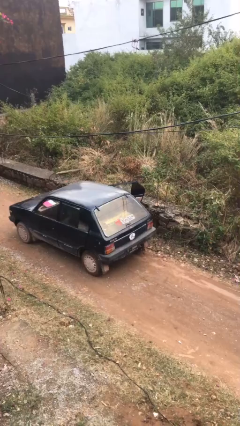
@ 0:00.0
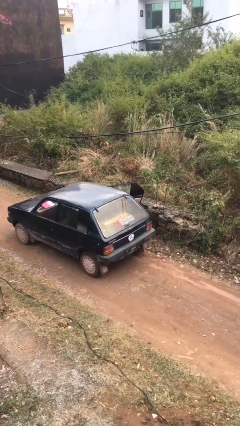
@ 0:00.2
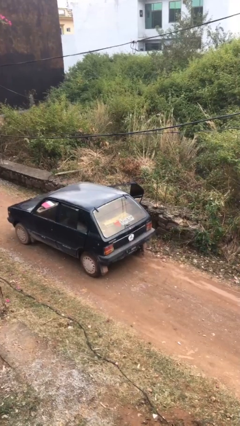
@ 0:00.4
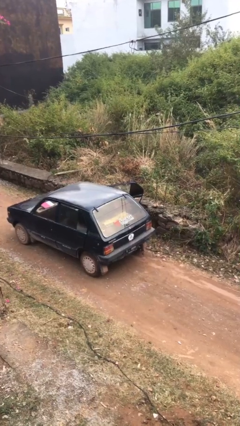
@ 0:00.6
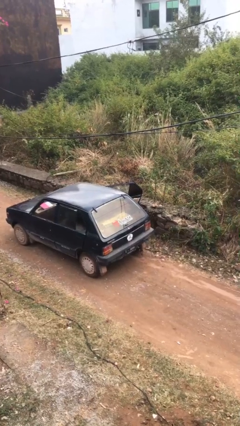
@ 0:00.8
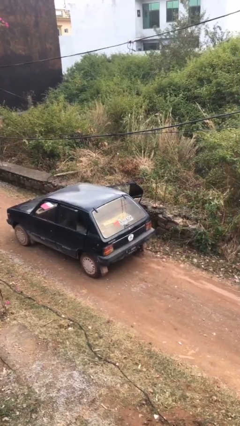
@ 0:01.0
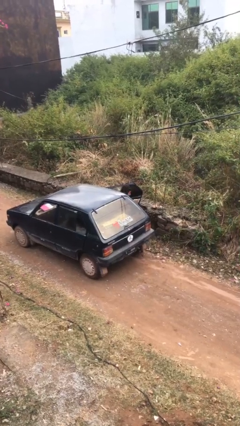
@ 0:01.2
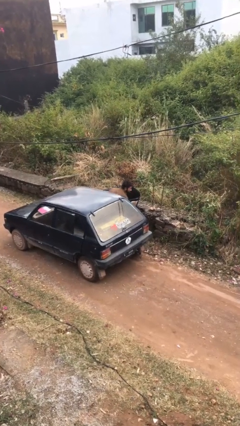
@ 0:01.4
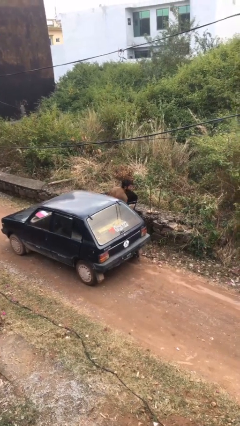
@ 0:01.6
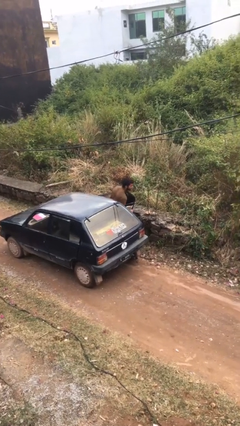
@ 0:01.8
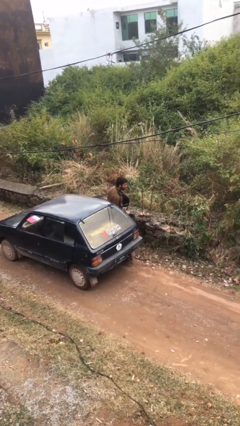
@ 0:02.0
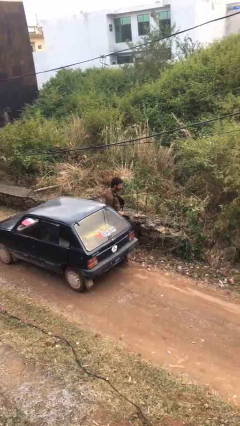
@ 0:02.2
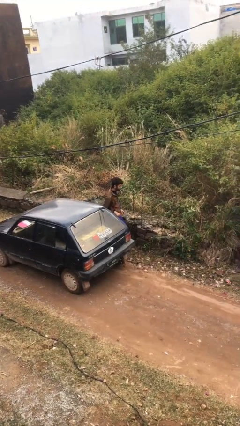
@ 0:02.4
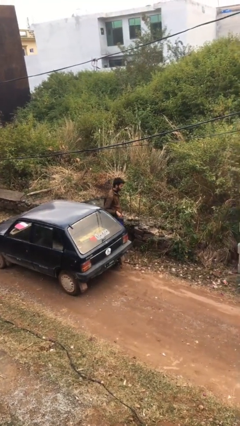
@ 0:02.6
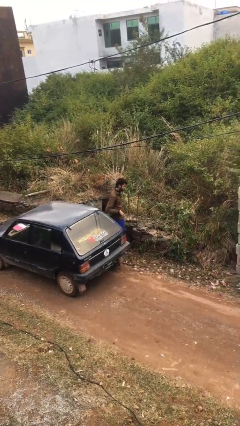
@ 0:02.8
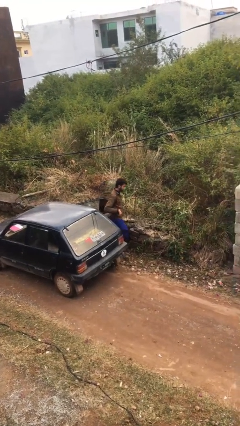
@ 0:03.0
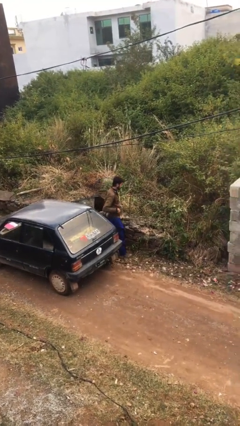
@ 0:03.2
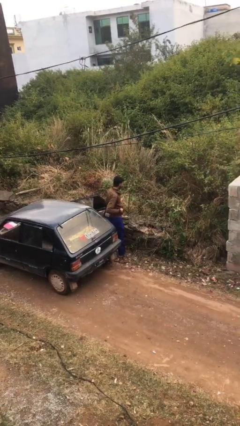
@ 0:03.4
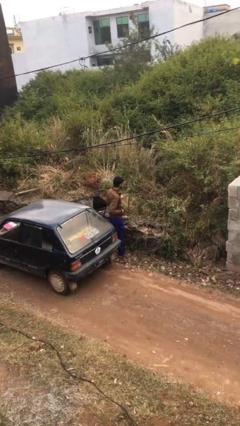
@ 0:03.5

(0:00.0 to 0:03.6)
person exits car

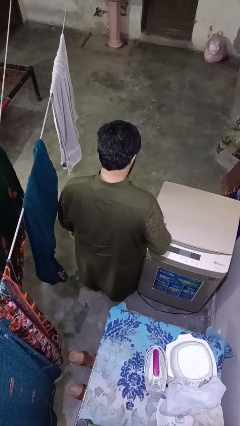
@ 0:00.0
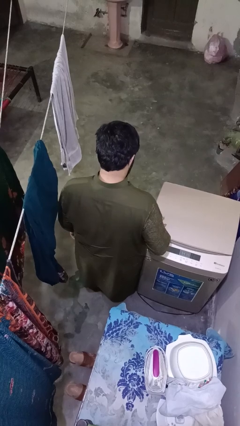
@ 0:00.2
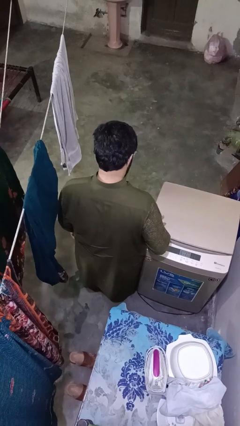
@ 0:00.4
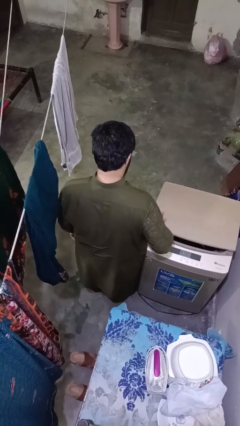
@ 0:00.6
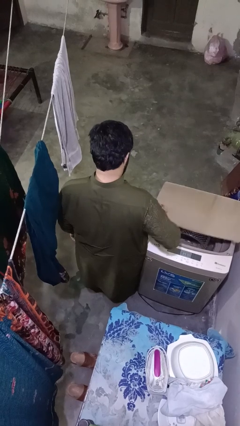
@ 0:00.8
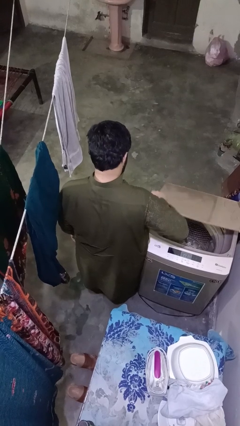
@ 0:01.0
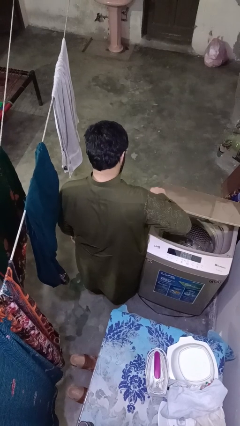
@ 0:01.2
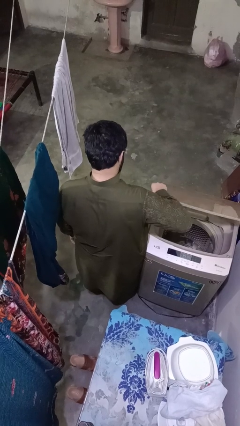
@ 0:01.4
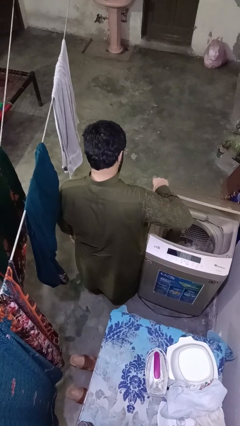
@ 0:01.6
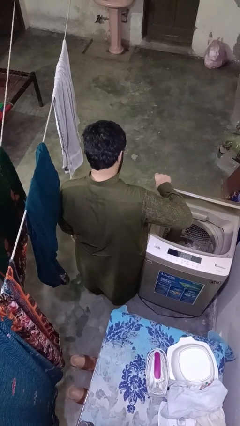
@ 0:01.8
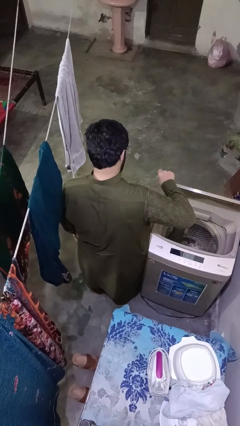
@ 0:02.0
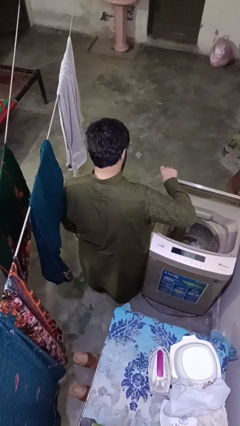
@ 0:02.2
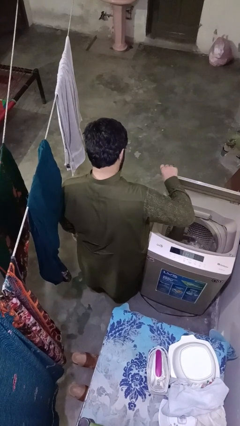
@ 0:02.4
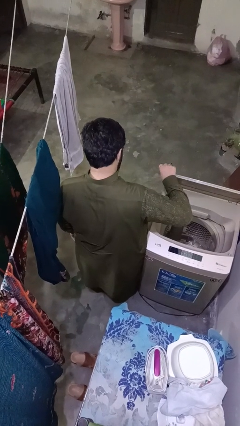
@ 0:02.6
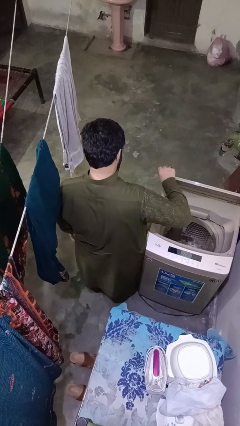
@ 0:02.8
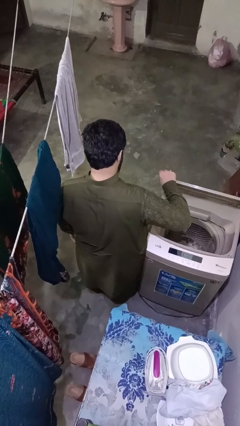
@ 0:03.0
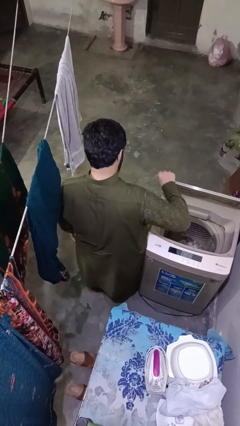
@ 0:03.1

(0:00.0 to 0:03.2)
person opens clothes washer

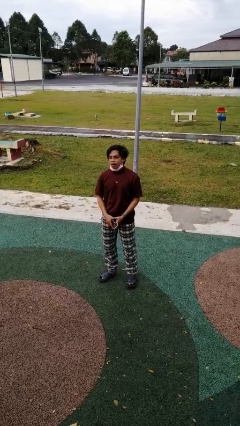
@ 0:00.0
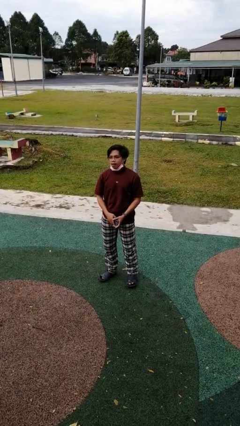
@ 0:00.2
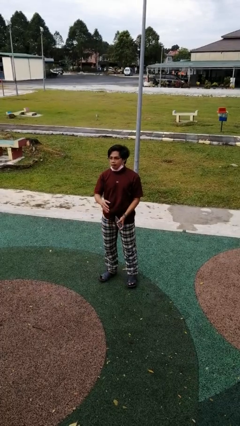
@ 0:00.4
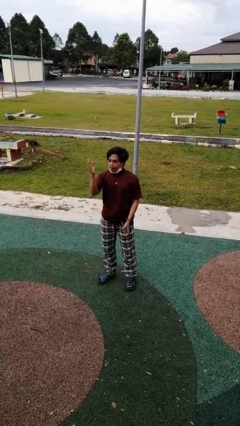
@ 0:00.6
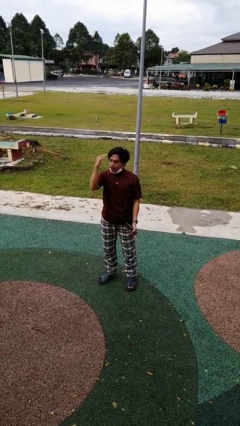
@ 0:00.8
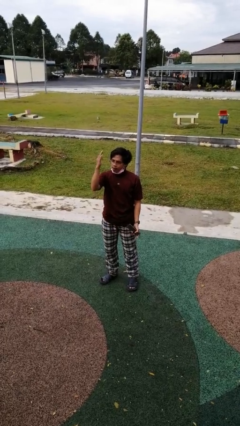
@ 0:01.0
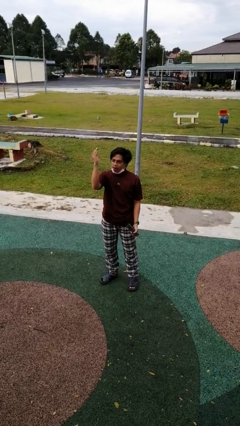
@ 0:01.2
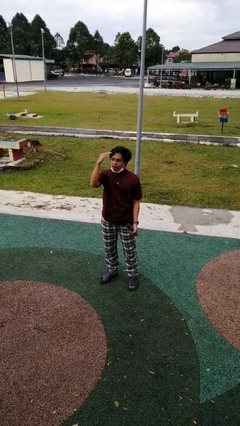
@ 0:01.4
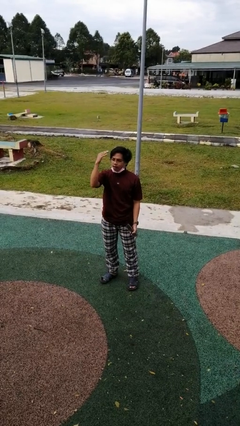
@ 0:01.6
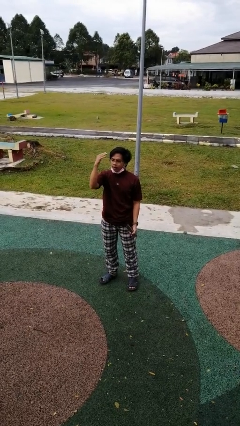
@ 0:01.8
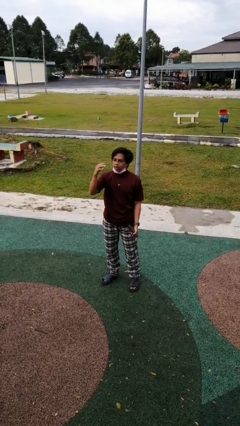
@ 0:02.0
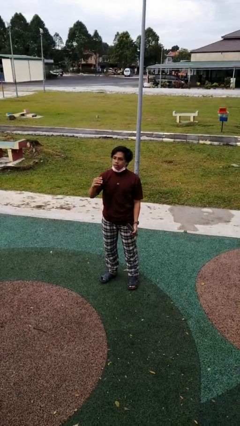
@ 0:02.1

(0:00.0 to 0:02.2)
person gestures come here

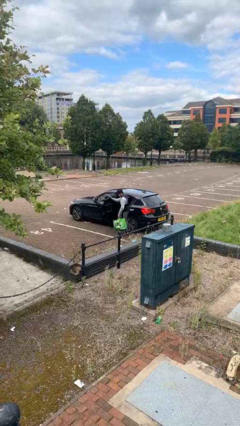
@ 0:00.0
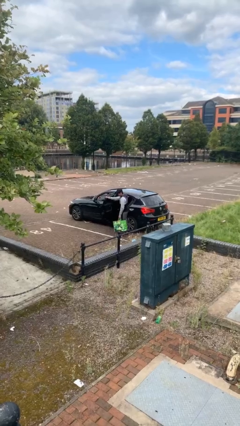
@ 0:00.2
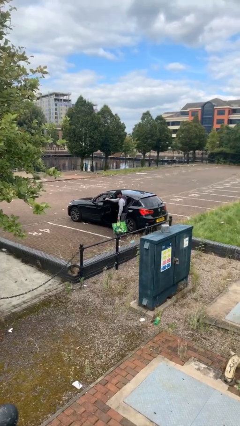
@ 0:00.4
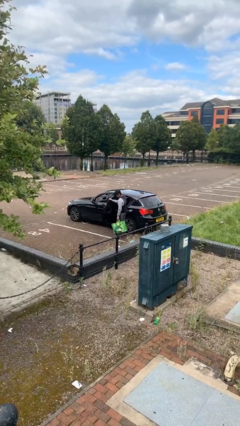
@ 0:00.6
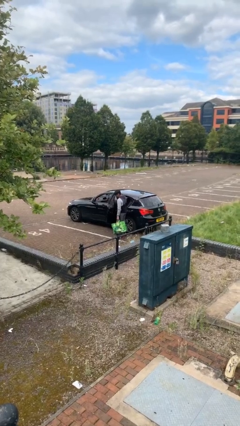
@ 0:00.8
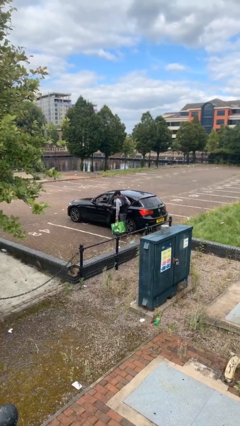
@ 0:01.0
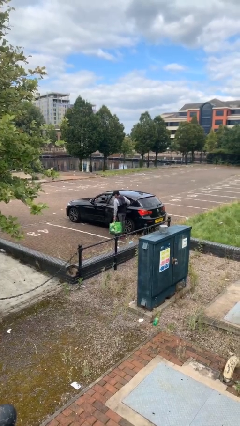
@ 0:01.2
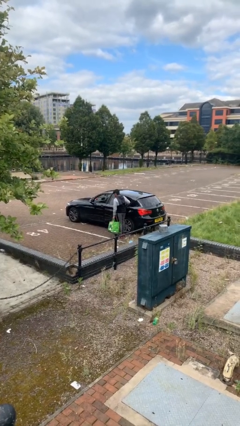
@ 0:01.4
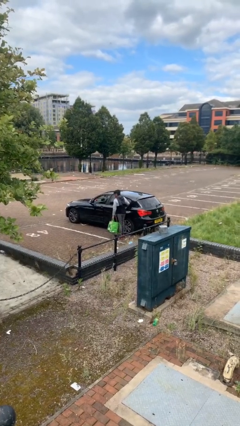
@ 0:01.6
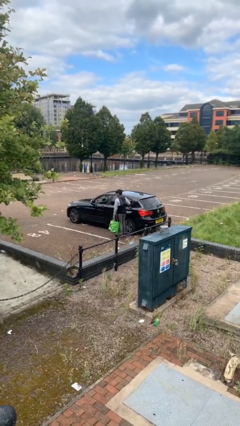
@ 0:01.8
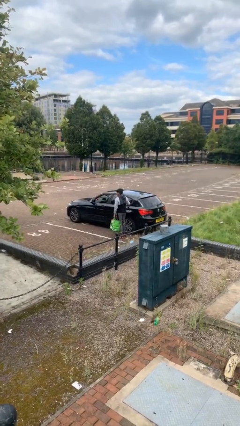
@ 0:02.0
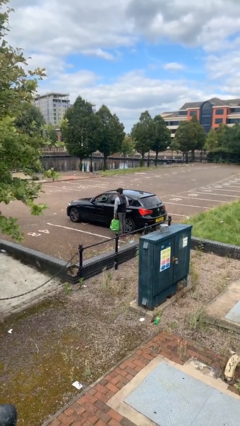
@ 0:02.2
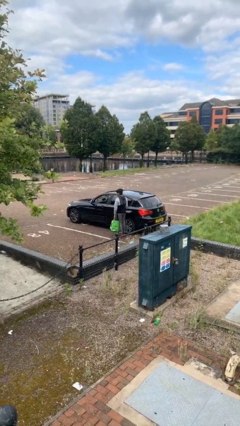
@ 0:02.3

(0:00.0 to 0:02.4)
person closes car door

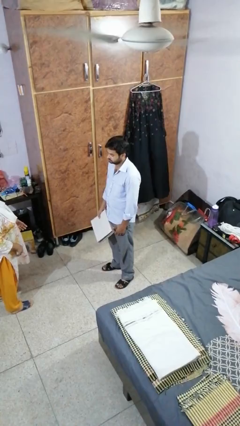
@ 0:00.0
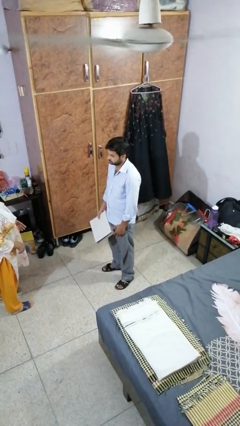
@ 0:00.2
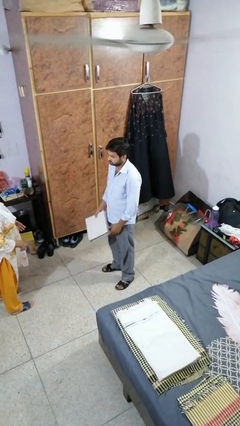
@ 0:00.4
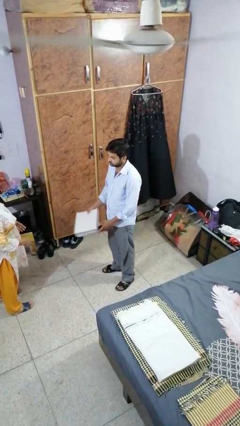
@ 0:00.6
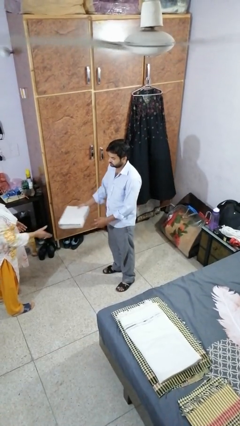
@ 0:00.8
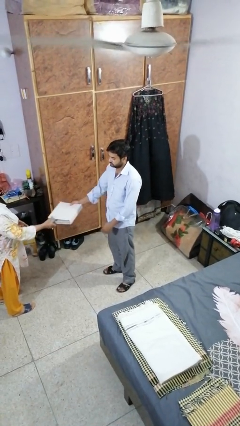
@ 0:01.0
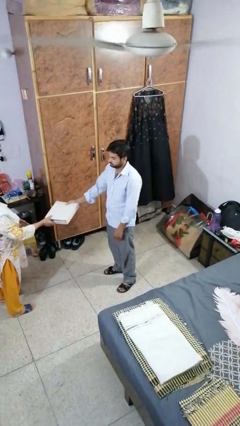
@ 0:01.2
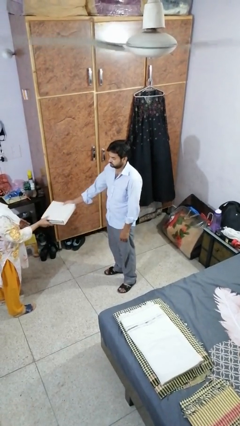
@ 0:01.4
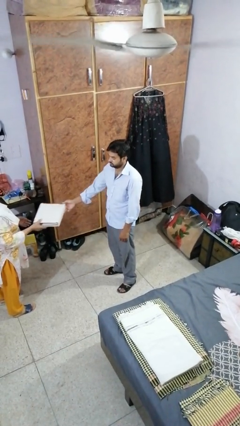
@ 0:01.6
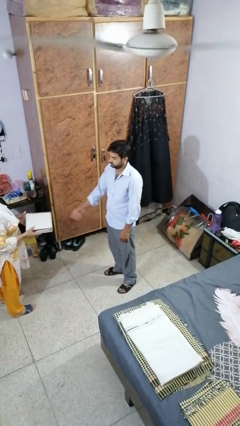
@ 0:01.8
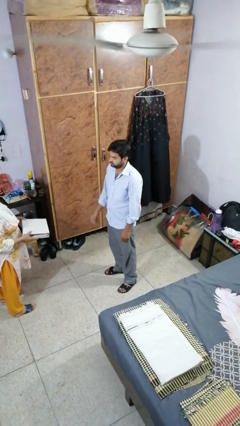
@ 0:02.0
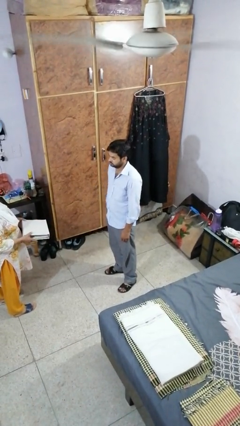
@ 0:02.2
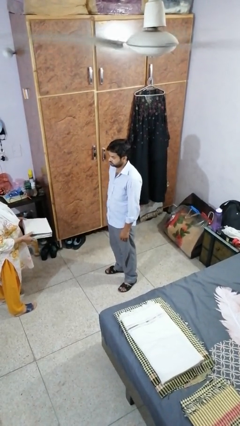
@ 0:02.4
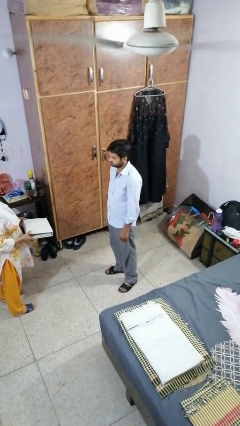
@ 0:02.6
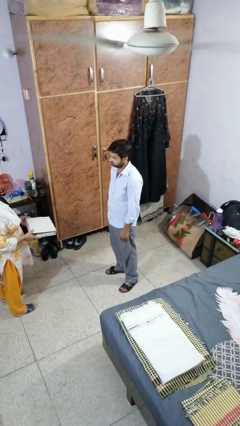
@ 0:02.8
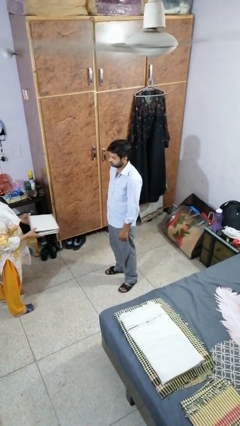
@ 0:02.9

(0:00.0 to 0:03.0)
person transfers object to person

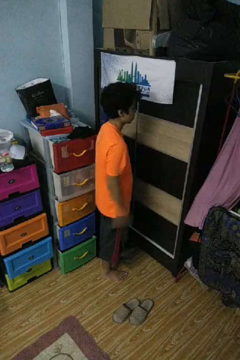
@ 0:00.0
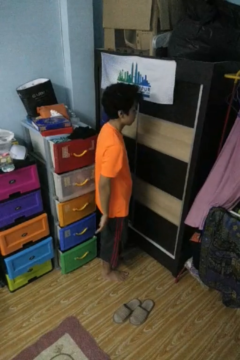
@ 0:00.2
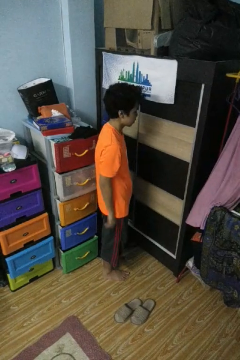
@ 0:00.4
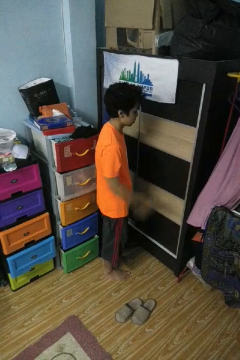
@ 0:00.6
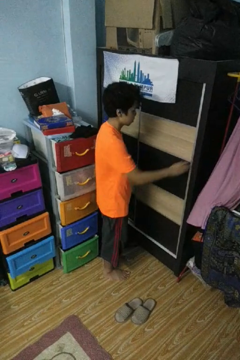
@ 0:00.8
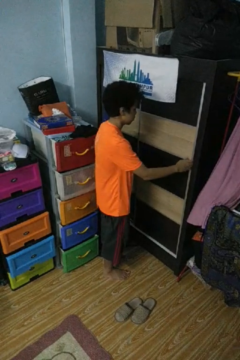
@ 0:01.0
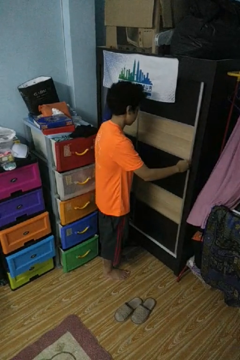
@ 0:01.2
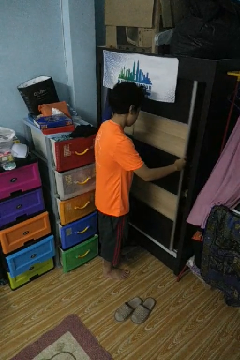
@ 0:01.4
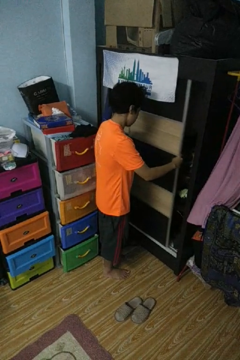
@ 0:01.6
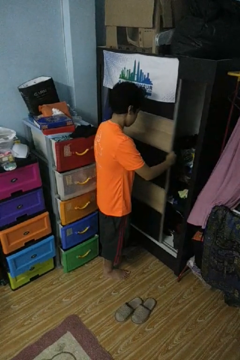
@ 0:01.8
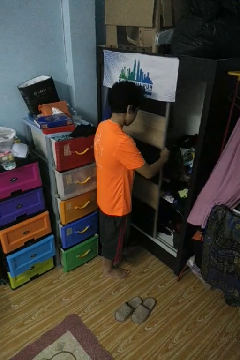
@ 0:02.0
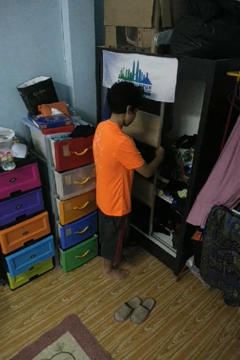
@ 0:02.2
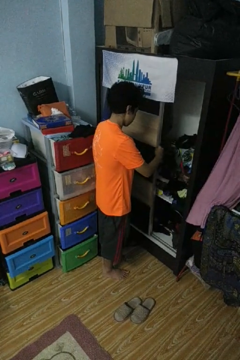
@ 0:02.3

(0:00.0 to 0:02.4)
person opens closet door

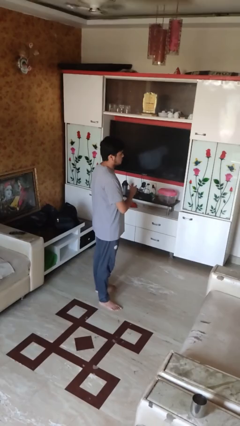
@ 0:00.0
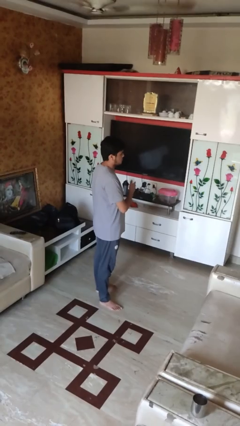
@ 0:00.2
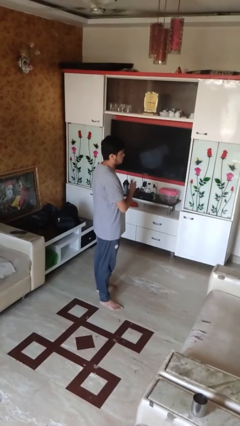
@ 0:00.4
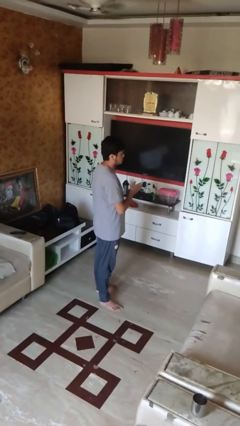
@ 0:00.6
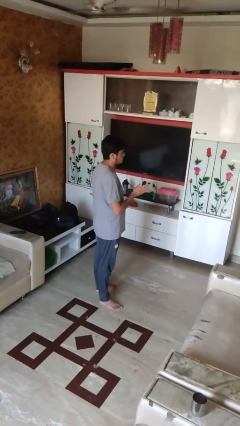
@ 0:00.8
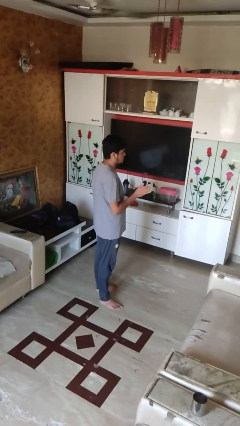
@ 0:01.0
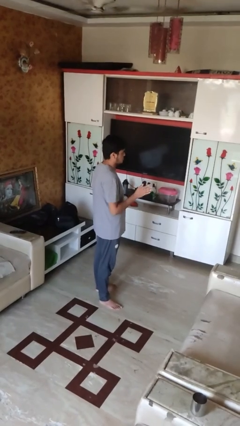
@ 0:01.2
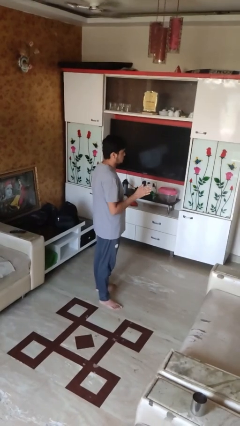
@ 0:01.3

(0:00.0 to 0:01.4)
person gestures swipe left
